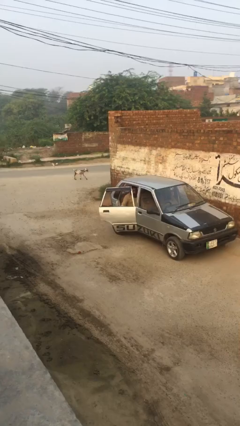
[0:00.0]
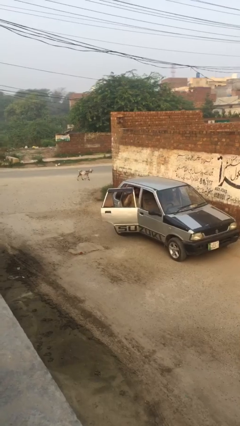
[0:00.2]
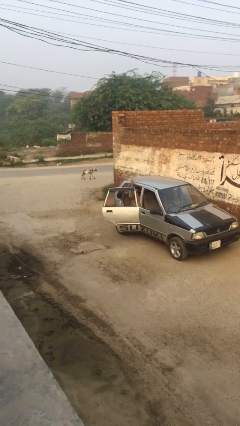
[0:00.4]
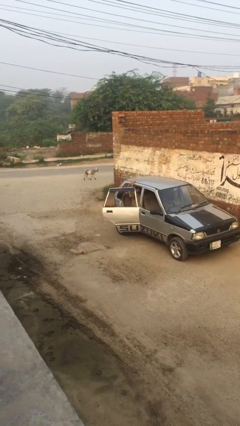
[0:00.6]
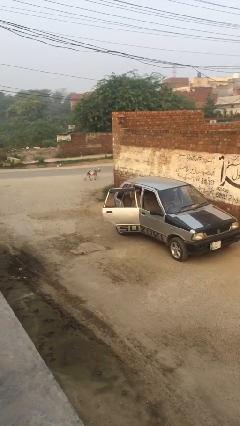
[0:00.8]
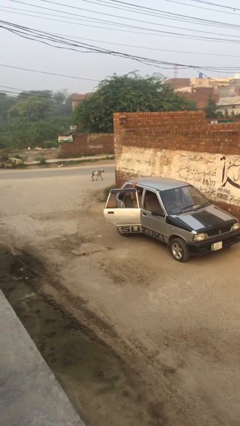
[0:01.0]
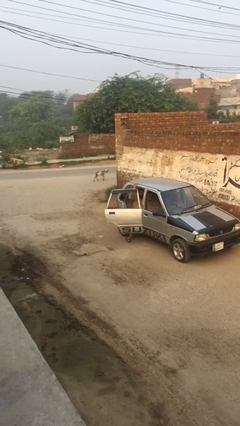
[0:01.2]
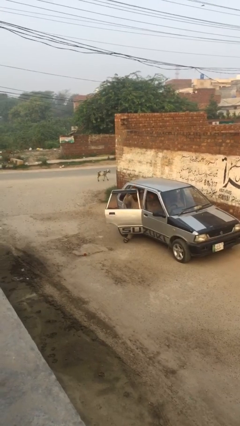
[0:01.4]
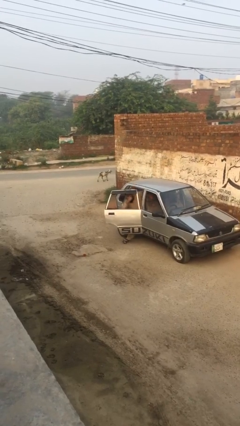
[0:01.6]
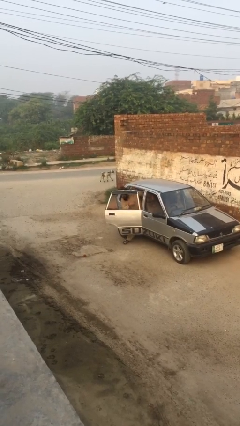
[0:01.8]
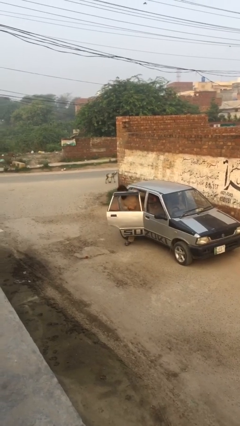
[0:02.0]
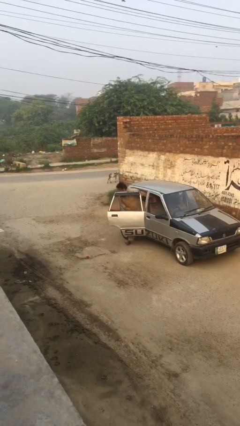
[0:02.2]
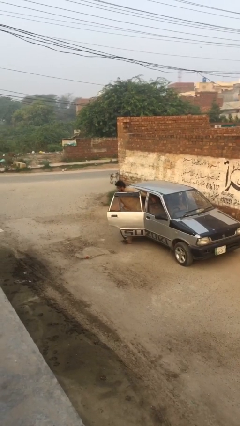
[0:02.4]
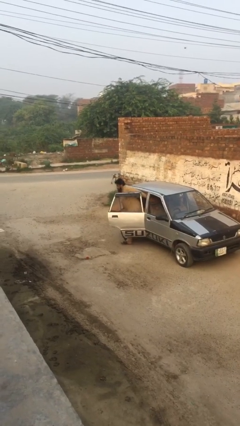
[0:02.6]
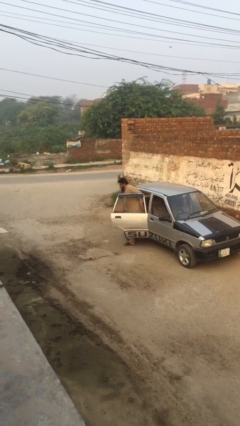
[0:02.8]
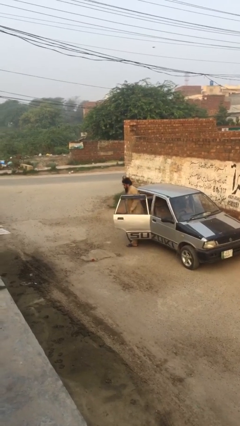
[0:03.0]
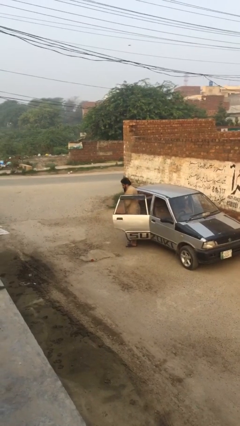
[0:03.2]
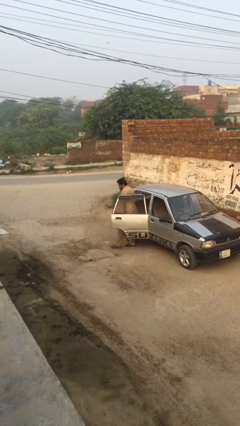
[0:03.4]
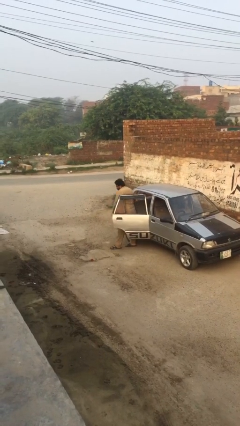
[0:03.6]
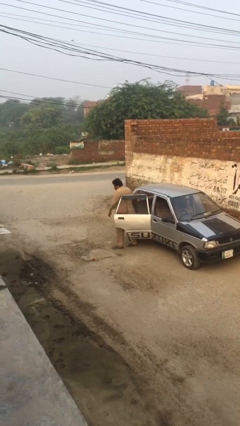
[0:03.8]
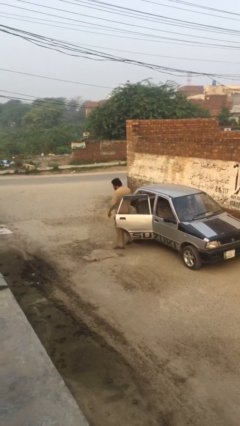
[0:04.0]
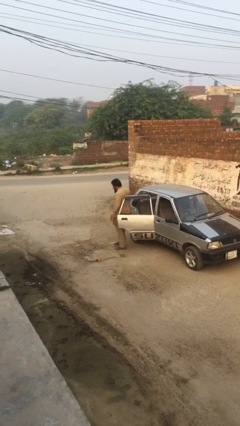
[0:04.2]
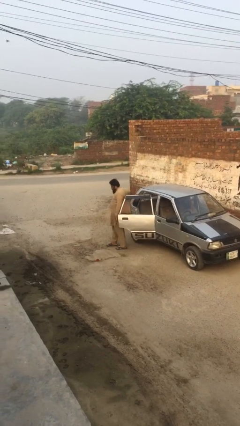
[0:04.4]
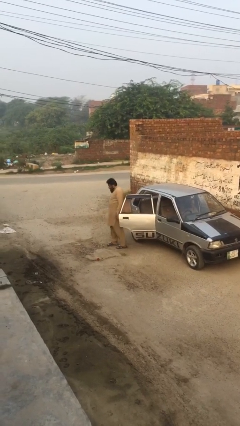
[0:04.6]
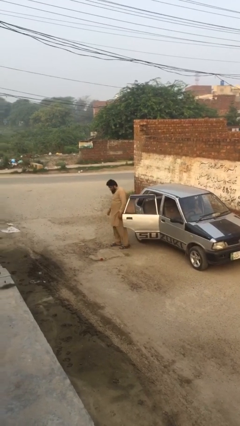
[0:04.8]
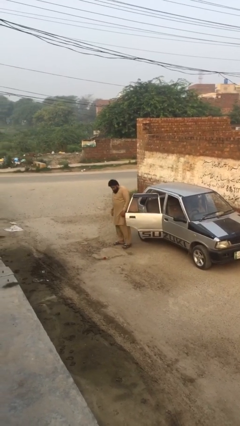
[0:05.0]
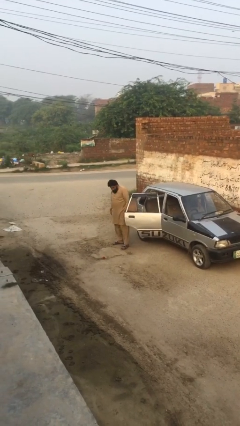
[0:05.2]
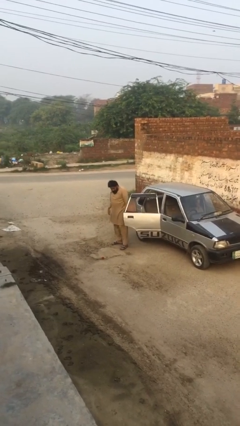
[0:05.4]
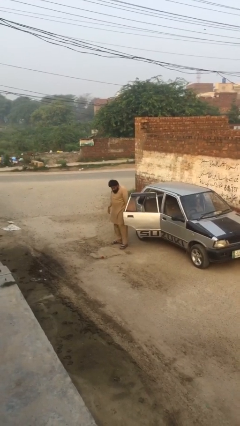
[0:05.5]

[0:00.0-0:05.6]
person exits car

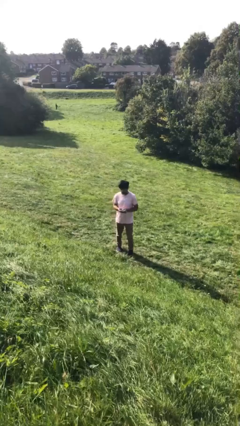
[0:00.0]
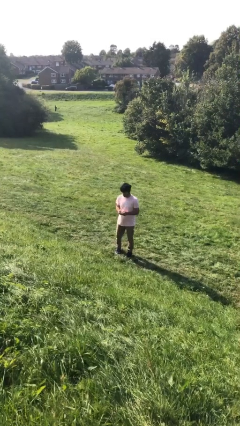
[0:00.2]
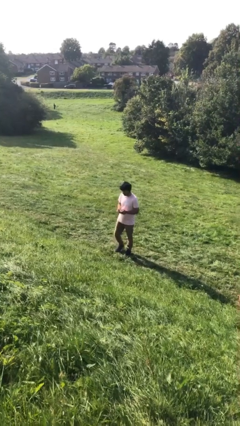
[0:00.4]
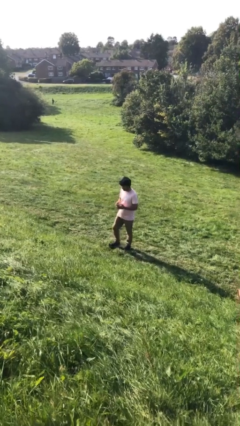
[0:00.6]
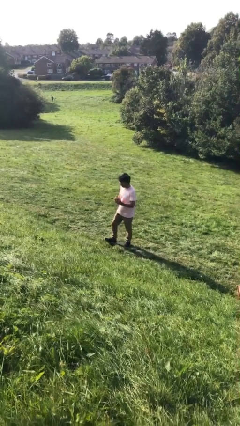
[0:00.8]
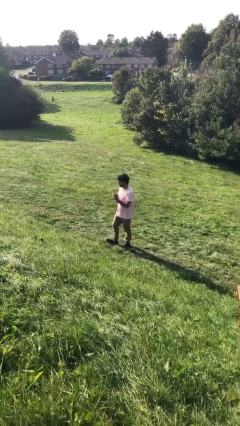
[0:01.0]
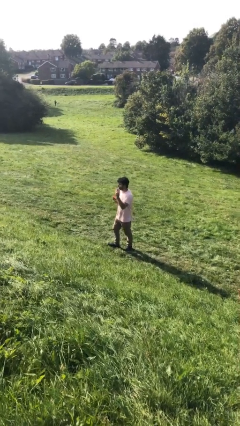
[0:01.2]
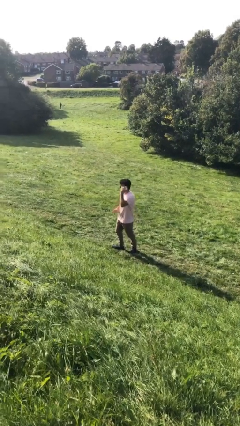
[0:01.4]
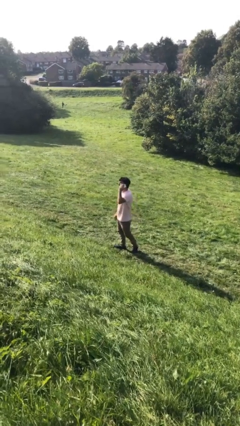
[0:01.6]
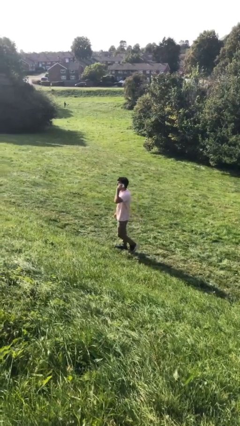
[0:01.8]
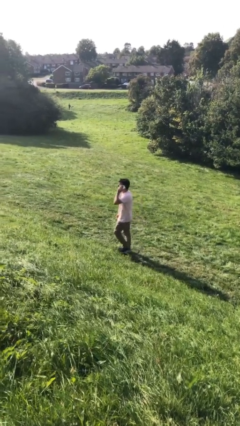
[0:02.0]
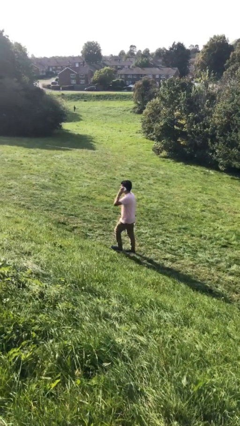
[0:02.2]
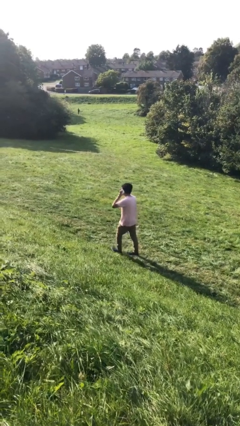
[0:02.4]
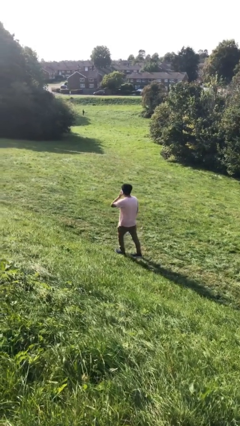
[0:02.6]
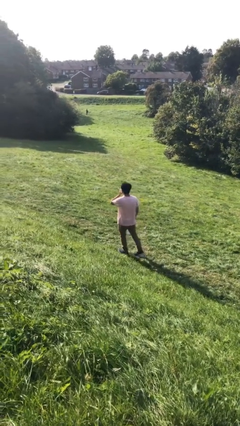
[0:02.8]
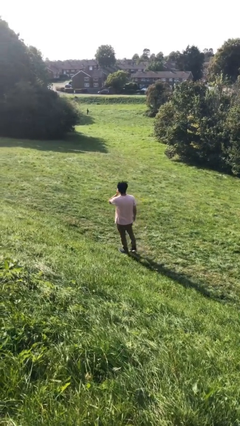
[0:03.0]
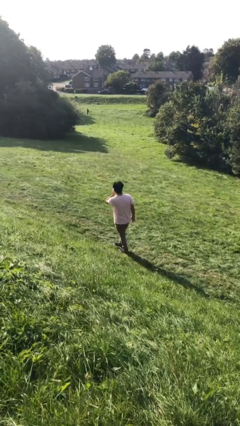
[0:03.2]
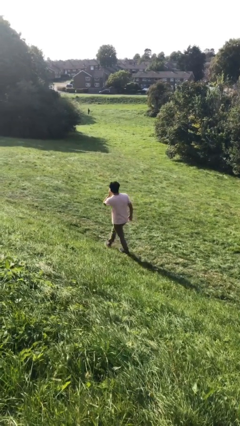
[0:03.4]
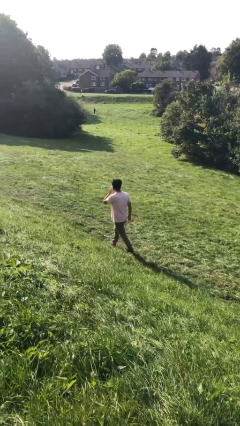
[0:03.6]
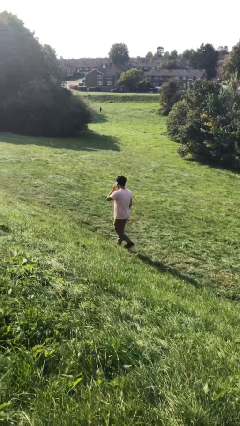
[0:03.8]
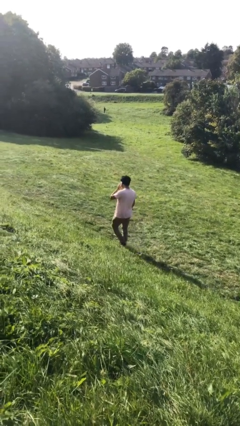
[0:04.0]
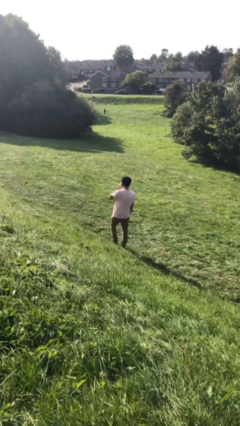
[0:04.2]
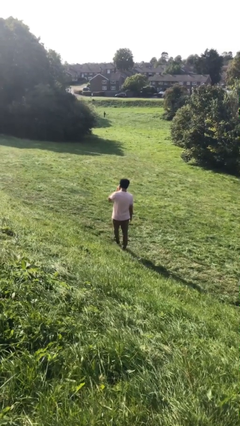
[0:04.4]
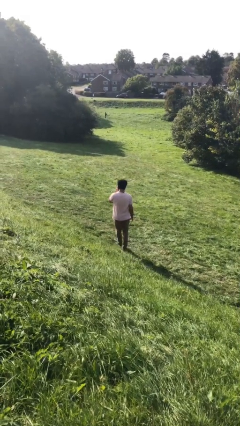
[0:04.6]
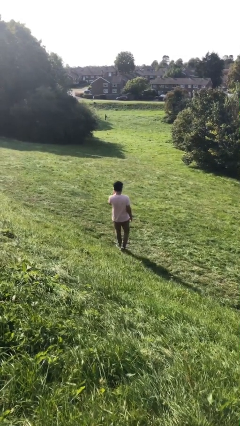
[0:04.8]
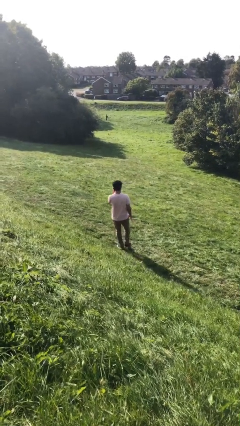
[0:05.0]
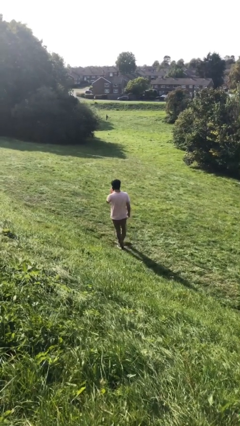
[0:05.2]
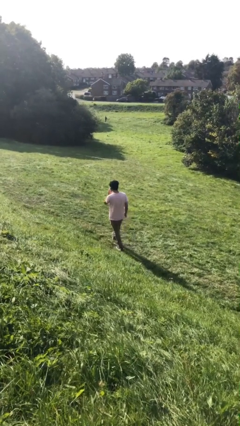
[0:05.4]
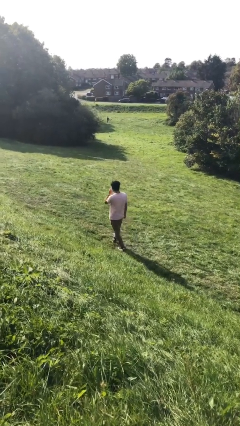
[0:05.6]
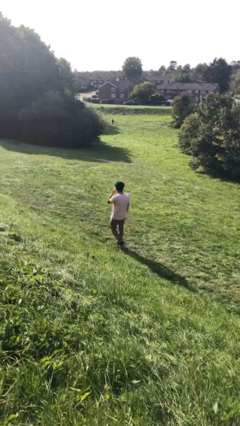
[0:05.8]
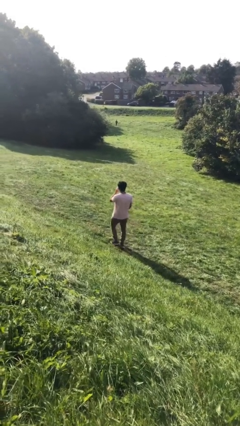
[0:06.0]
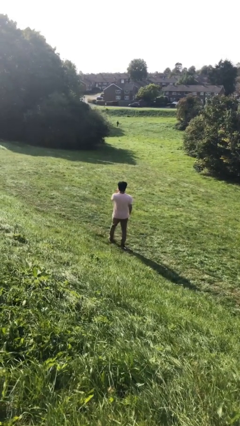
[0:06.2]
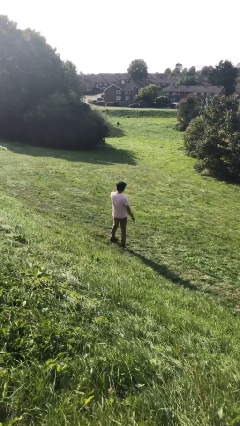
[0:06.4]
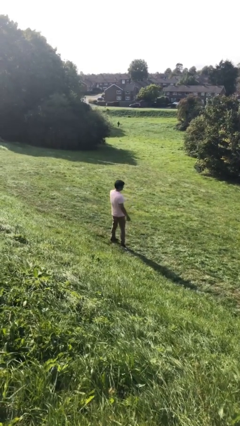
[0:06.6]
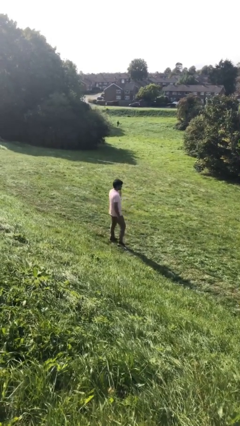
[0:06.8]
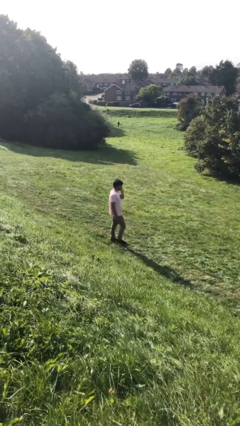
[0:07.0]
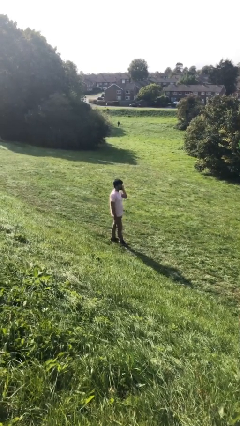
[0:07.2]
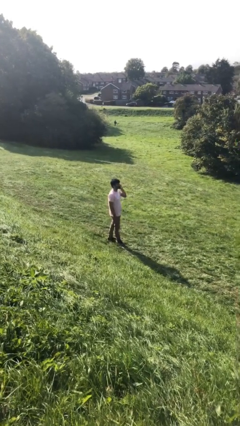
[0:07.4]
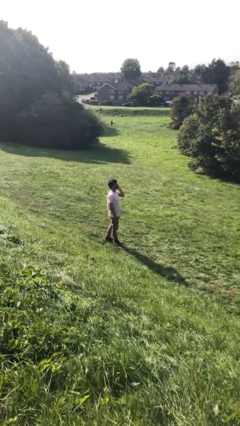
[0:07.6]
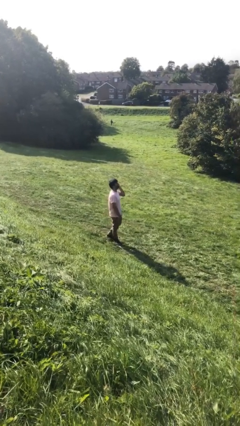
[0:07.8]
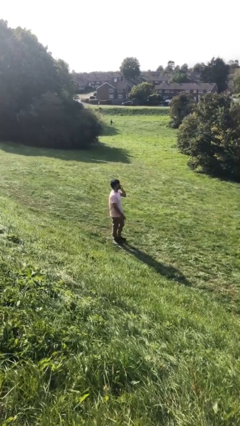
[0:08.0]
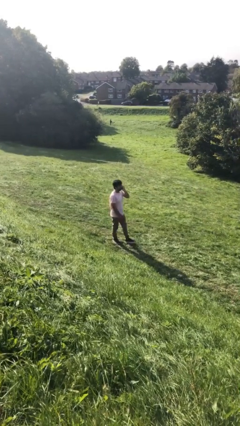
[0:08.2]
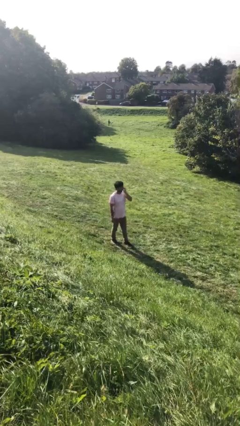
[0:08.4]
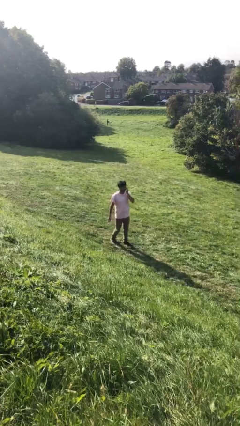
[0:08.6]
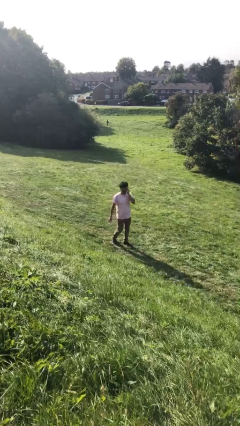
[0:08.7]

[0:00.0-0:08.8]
person talks on phone

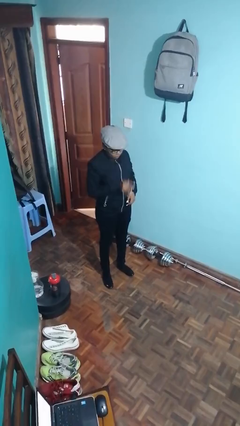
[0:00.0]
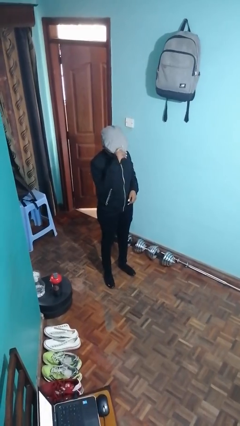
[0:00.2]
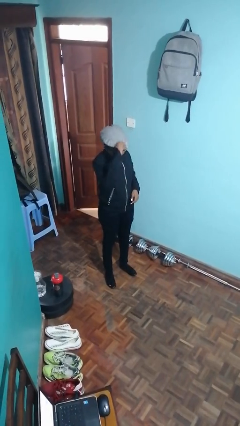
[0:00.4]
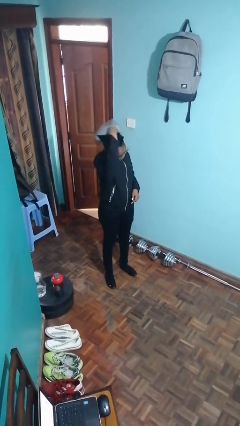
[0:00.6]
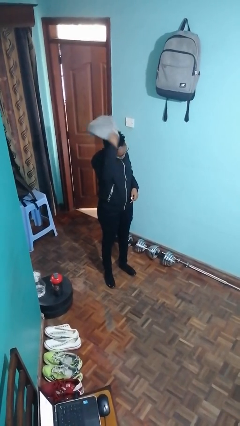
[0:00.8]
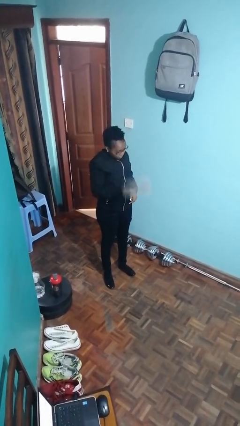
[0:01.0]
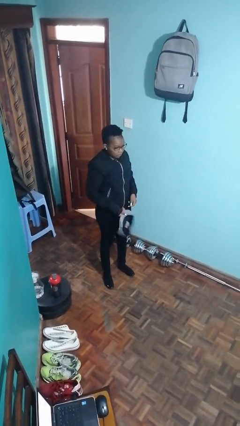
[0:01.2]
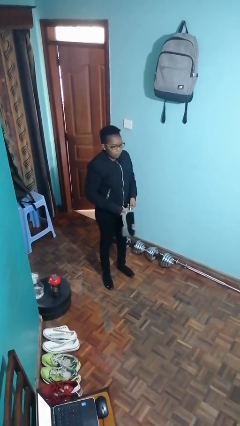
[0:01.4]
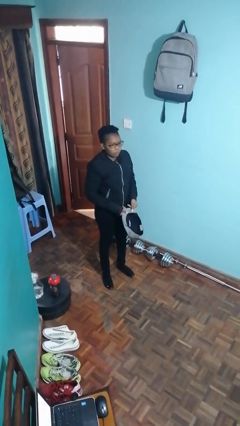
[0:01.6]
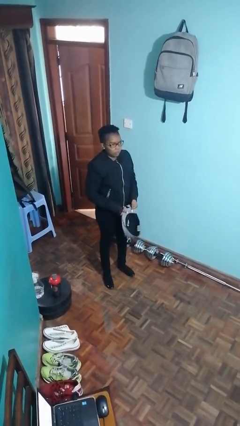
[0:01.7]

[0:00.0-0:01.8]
person takes off hat

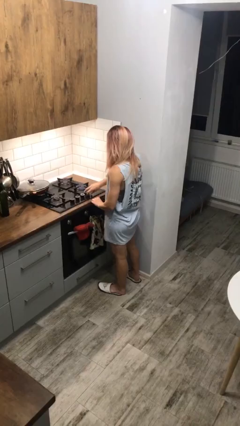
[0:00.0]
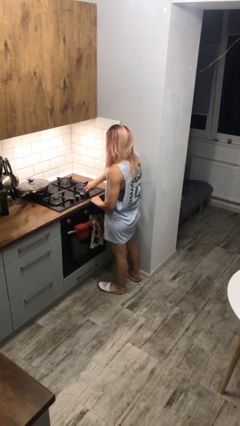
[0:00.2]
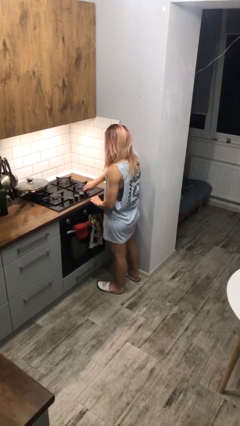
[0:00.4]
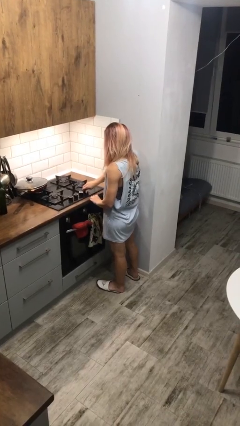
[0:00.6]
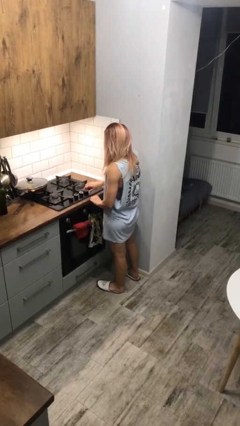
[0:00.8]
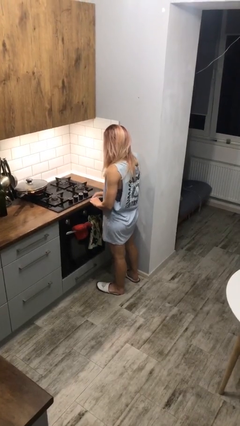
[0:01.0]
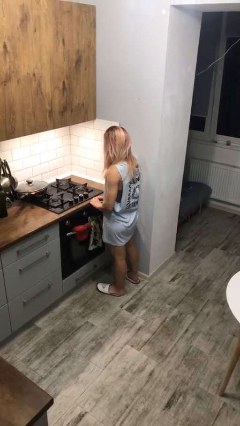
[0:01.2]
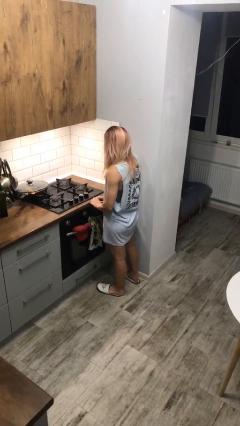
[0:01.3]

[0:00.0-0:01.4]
person turns off stovetop
